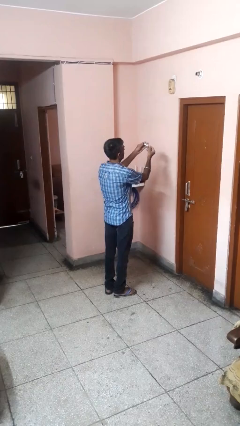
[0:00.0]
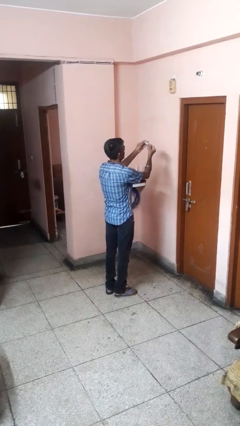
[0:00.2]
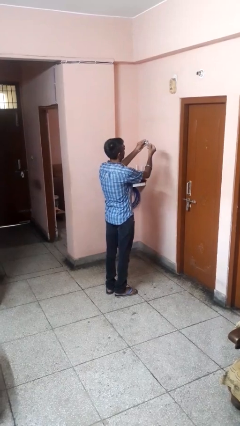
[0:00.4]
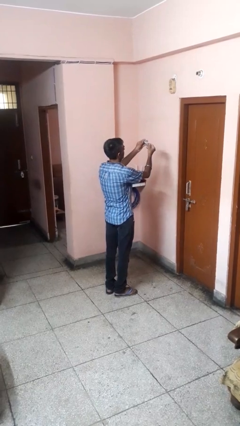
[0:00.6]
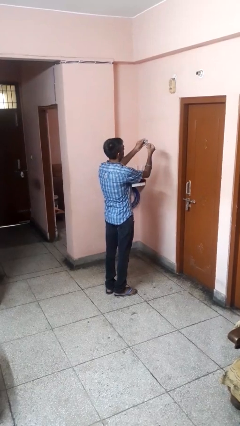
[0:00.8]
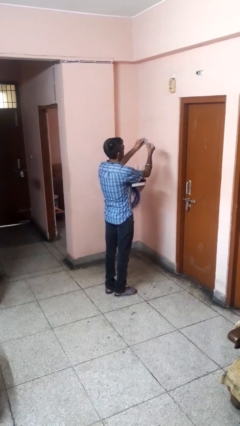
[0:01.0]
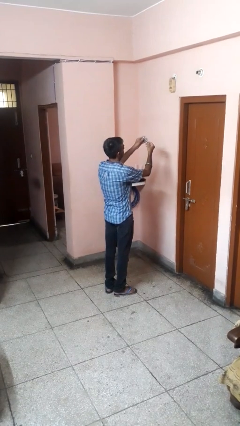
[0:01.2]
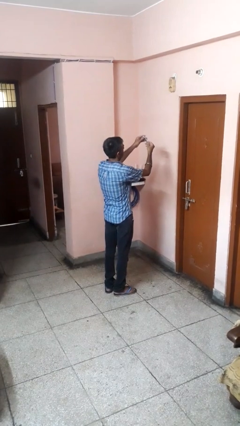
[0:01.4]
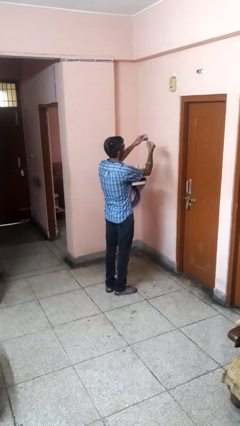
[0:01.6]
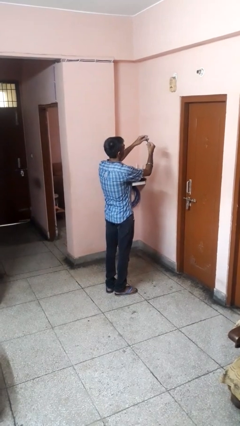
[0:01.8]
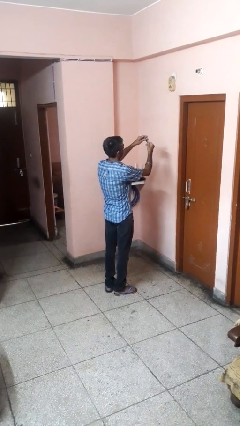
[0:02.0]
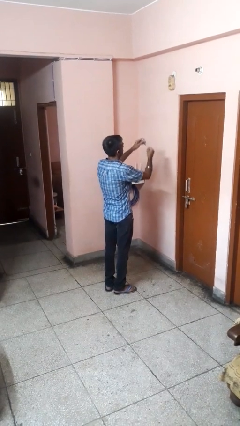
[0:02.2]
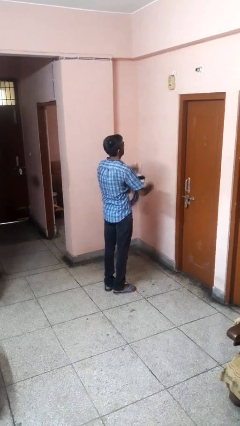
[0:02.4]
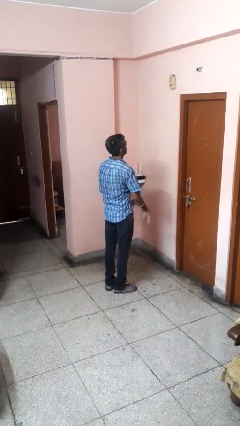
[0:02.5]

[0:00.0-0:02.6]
person clips fingernails

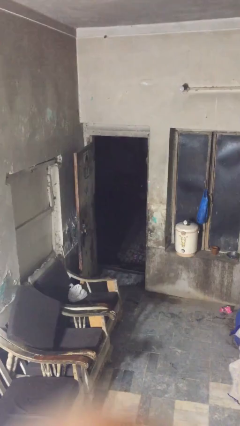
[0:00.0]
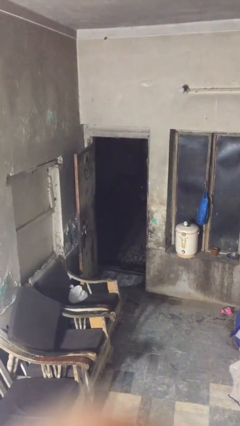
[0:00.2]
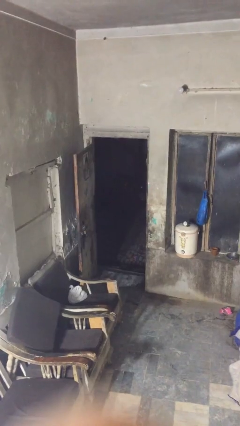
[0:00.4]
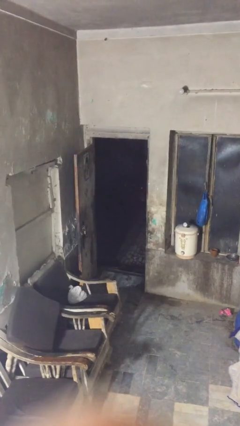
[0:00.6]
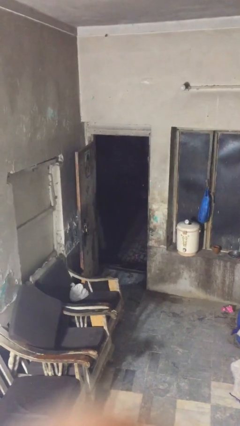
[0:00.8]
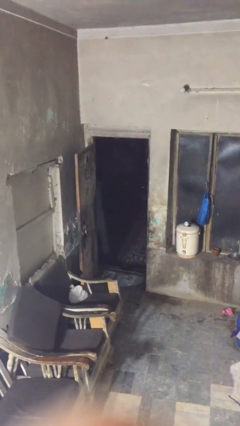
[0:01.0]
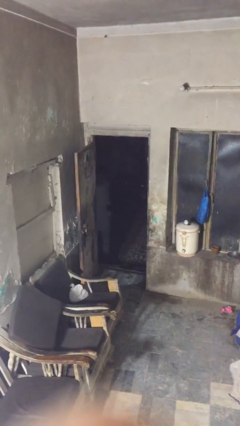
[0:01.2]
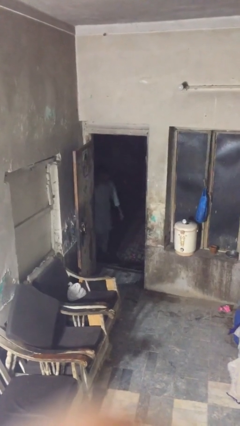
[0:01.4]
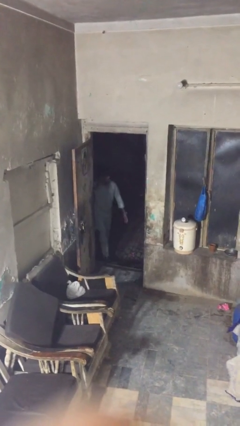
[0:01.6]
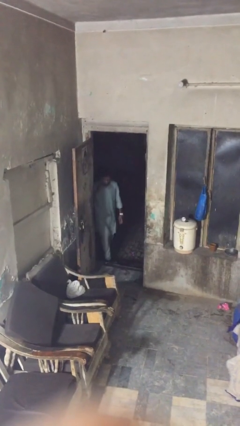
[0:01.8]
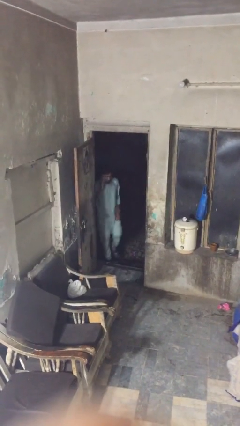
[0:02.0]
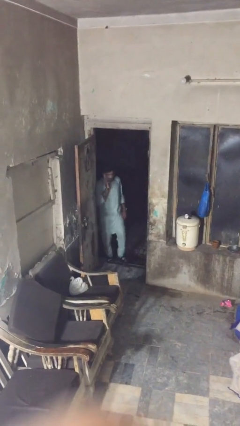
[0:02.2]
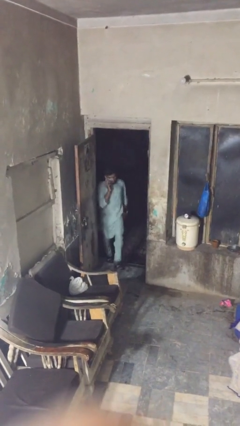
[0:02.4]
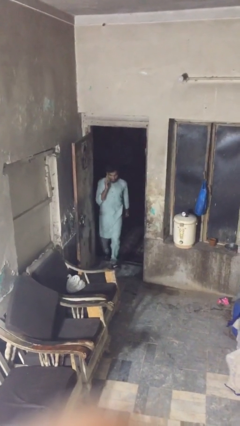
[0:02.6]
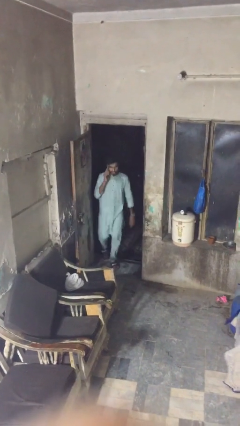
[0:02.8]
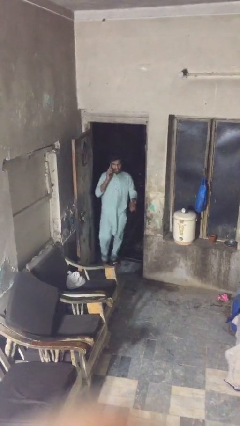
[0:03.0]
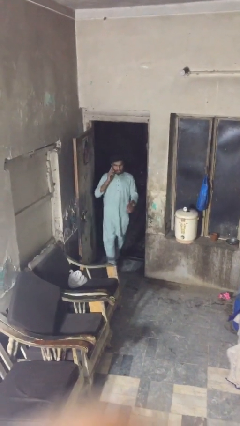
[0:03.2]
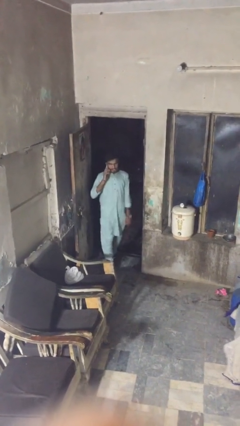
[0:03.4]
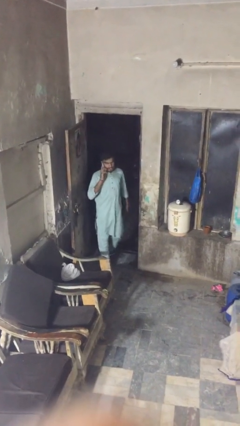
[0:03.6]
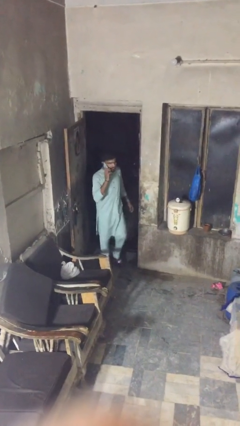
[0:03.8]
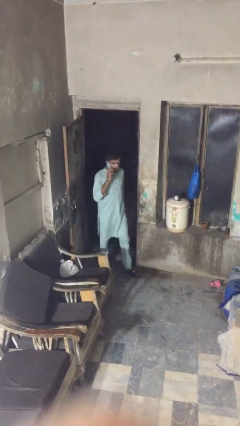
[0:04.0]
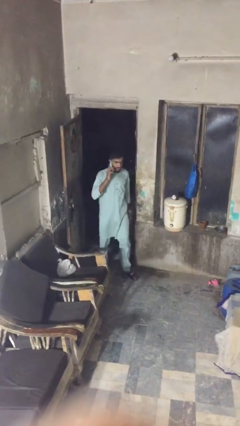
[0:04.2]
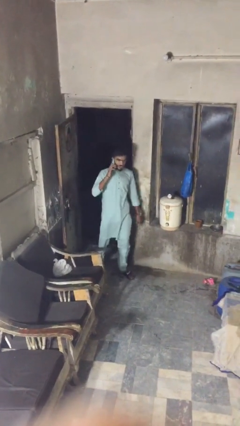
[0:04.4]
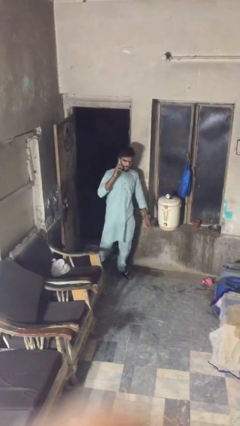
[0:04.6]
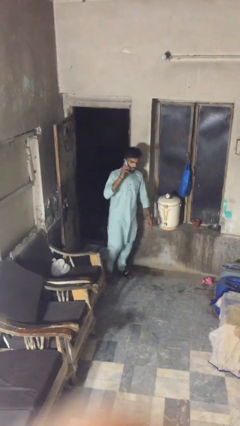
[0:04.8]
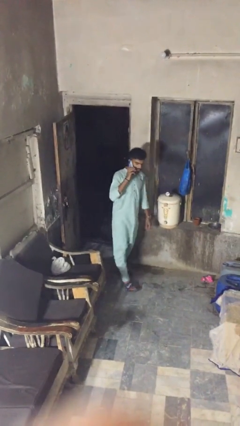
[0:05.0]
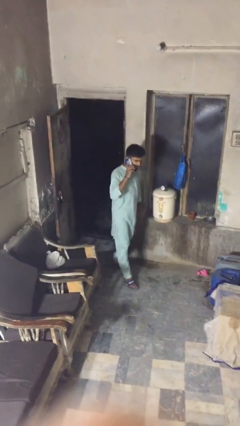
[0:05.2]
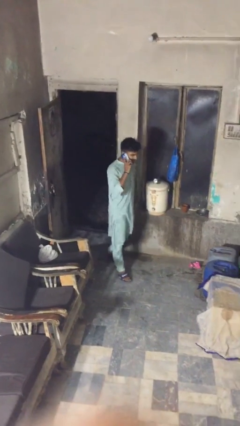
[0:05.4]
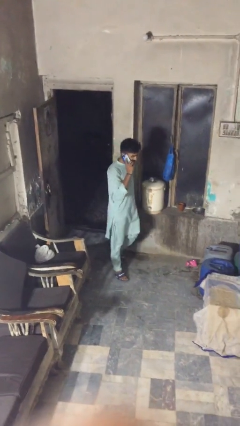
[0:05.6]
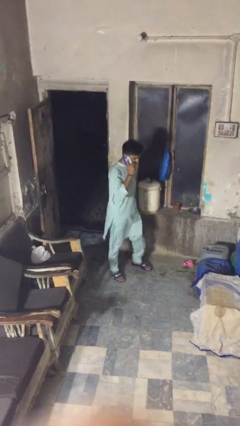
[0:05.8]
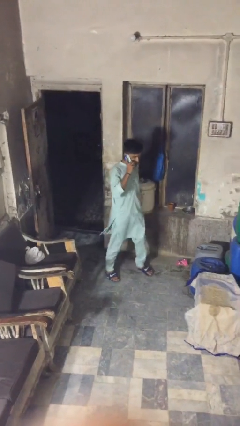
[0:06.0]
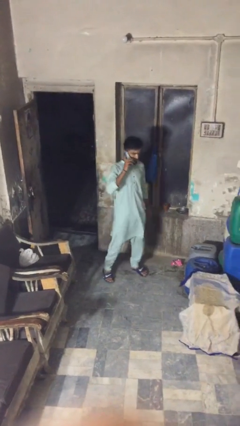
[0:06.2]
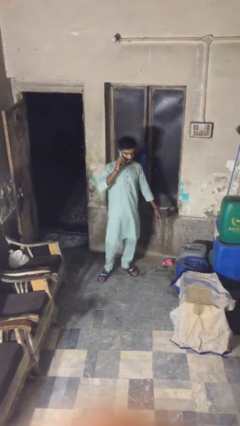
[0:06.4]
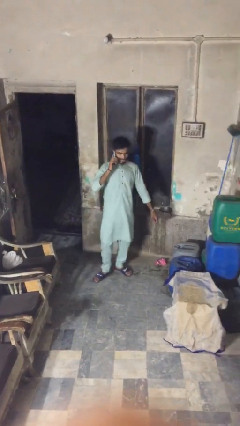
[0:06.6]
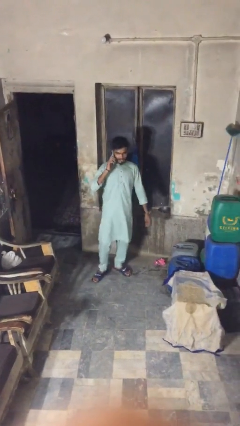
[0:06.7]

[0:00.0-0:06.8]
person enters scene through structure

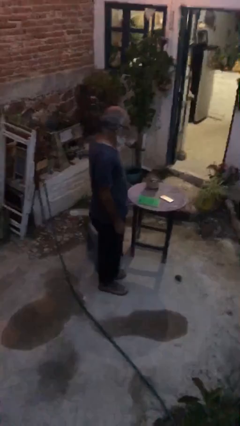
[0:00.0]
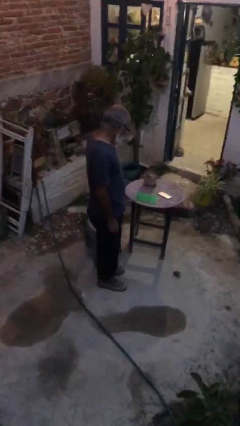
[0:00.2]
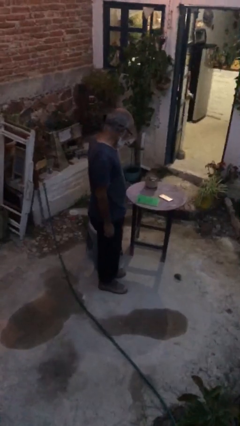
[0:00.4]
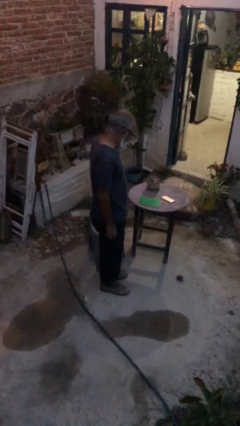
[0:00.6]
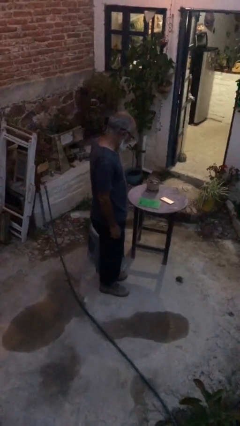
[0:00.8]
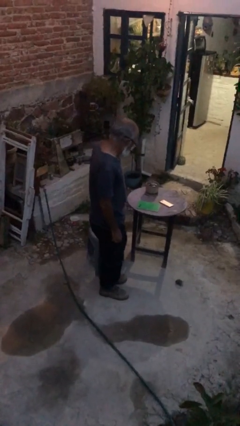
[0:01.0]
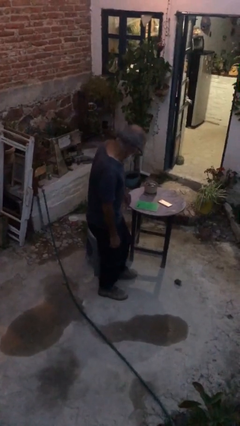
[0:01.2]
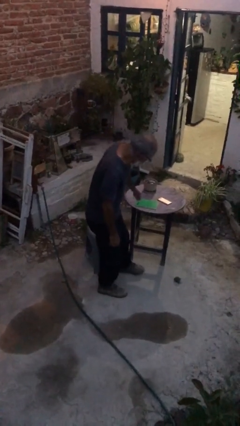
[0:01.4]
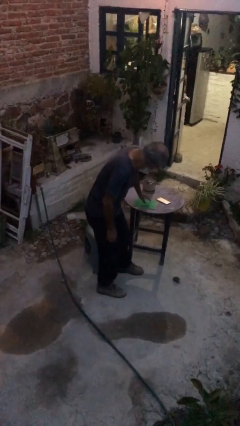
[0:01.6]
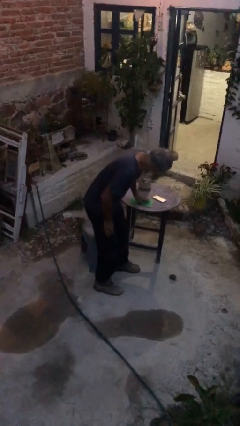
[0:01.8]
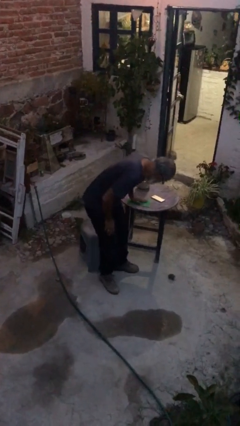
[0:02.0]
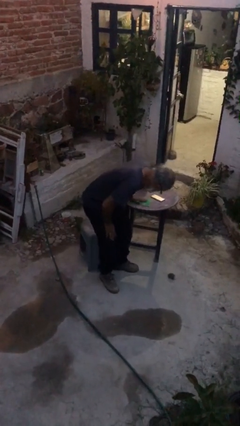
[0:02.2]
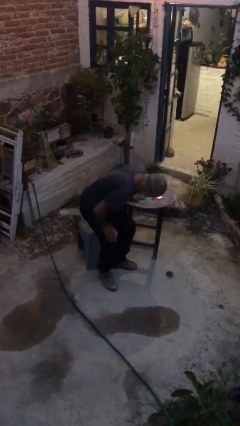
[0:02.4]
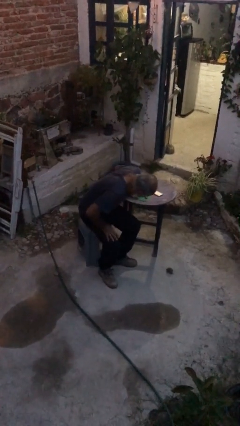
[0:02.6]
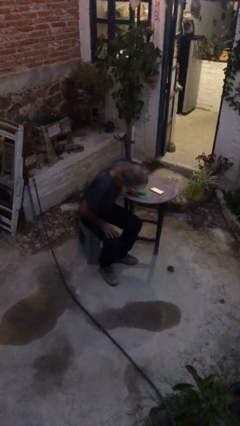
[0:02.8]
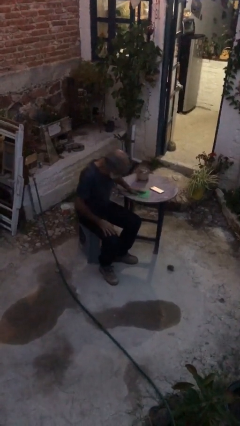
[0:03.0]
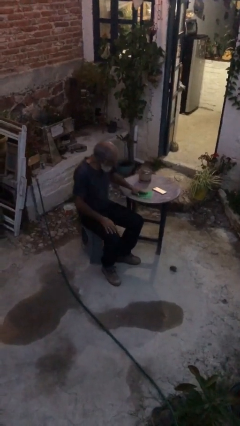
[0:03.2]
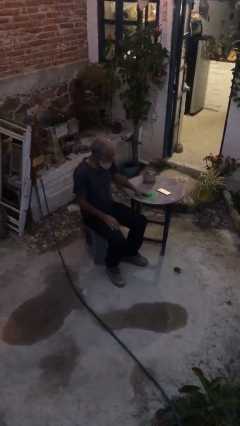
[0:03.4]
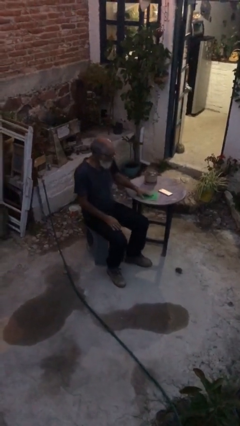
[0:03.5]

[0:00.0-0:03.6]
person sits down

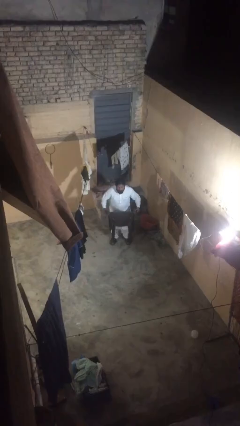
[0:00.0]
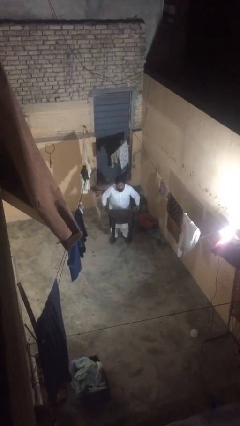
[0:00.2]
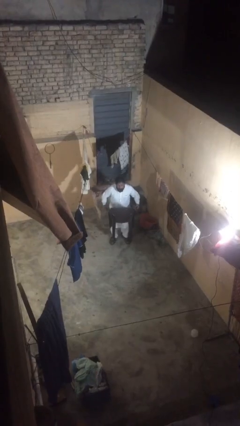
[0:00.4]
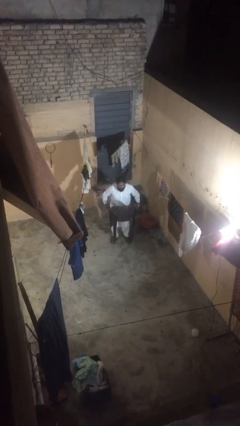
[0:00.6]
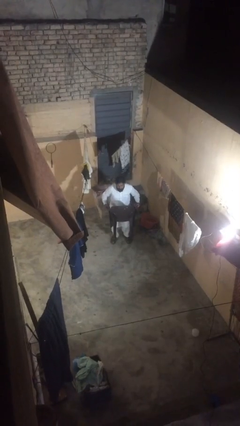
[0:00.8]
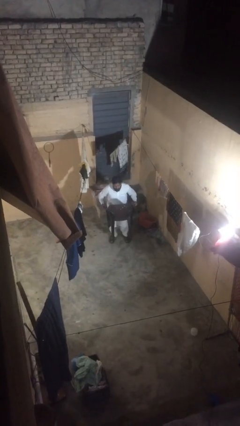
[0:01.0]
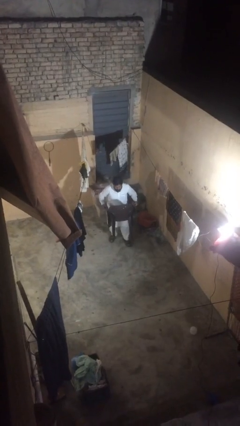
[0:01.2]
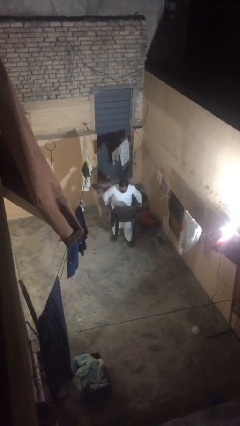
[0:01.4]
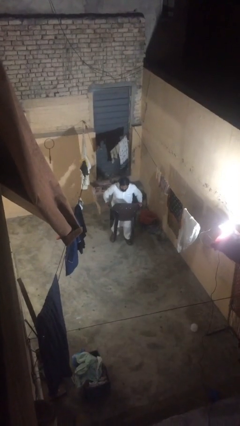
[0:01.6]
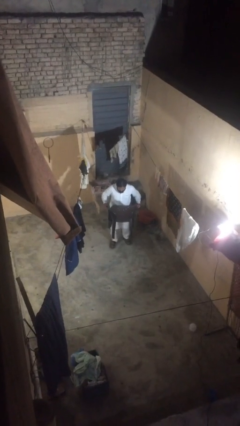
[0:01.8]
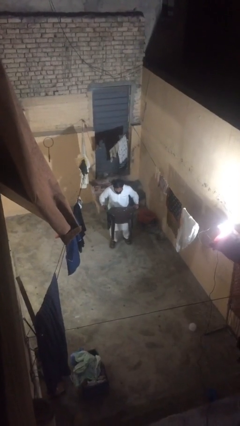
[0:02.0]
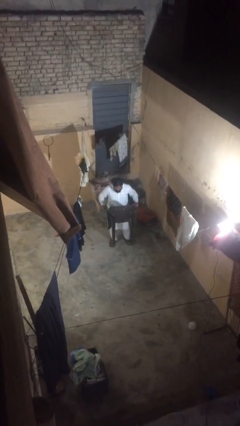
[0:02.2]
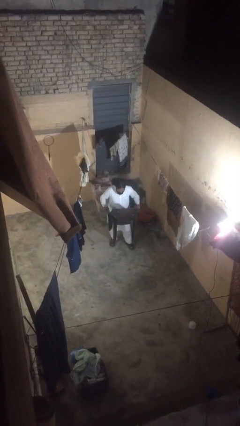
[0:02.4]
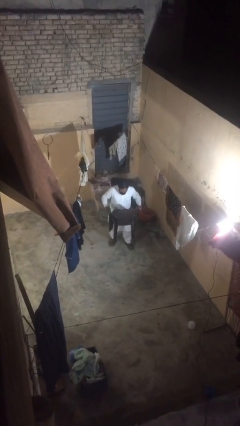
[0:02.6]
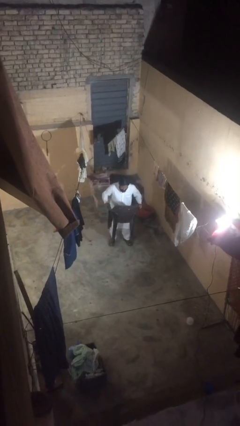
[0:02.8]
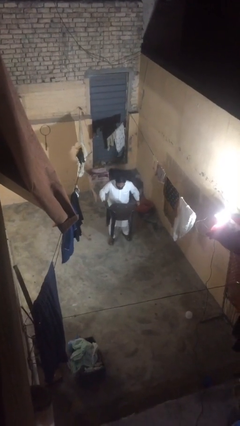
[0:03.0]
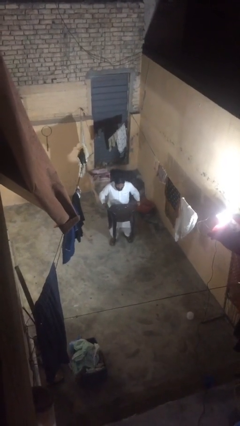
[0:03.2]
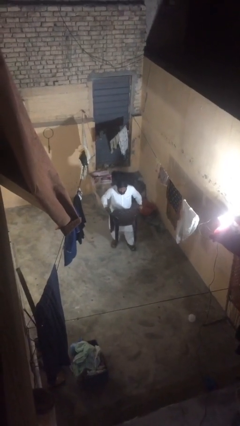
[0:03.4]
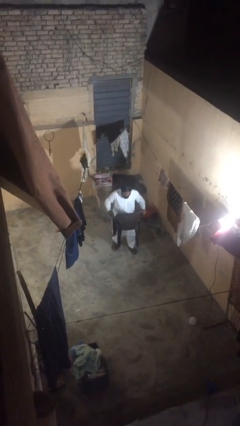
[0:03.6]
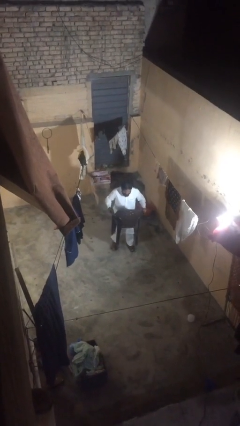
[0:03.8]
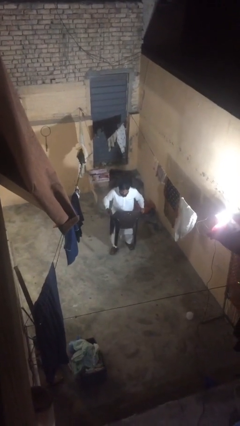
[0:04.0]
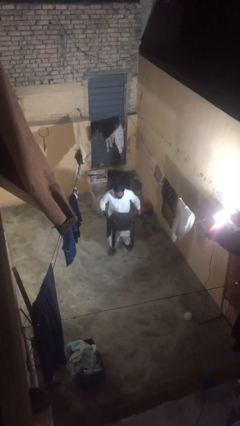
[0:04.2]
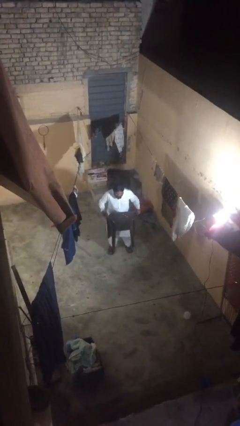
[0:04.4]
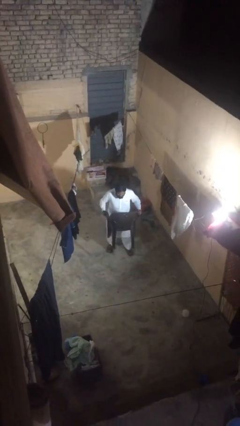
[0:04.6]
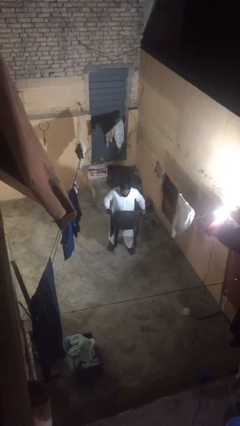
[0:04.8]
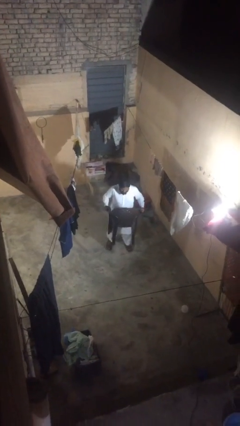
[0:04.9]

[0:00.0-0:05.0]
person carries heavy object
